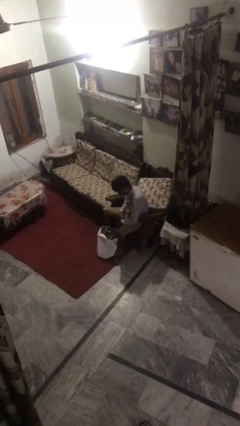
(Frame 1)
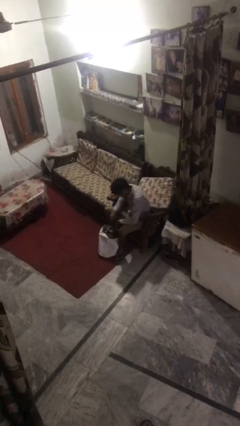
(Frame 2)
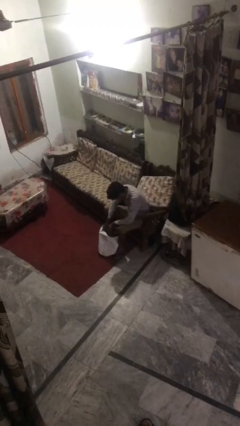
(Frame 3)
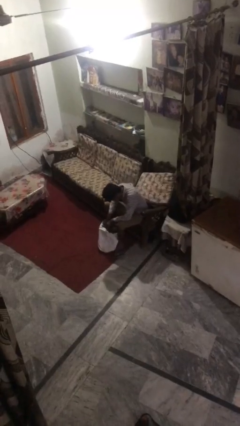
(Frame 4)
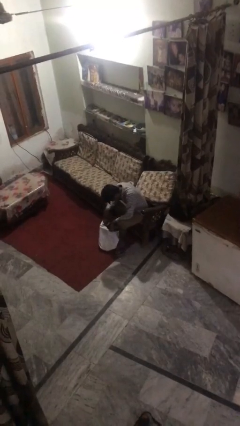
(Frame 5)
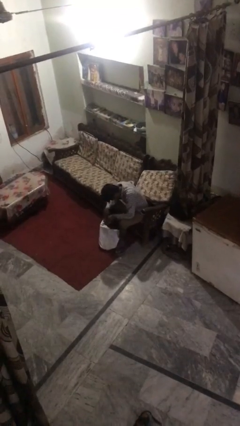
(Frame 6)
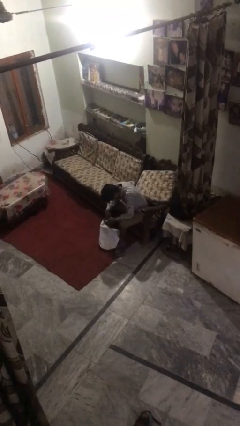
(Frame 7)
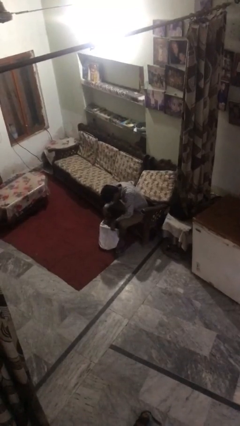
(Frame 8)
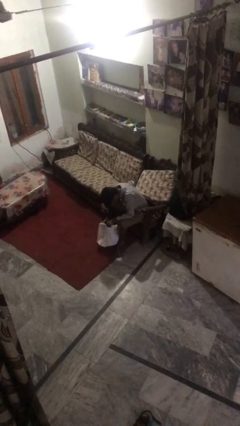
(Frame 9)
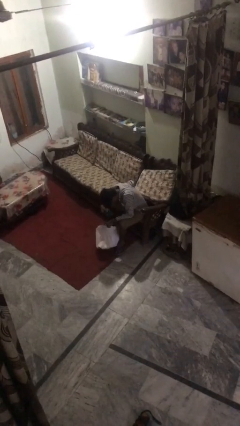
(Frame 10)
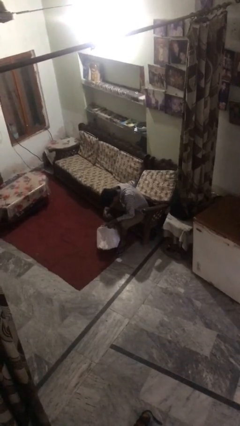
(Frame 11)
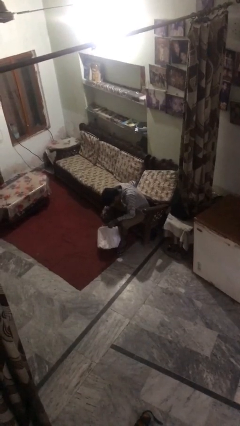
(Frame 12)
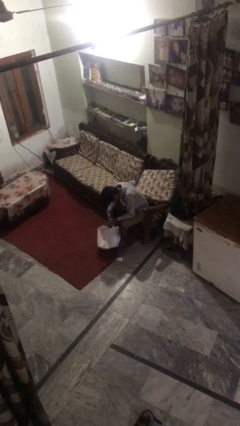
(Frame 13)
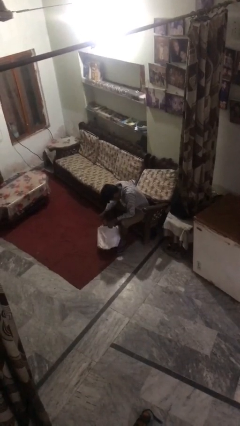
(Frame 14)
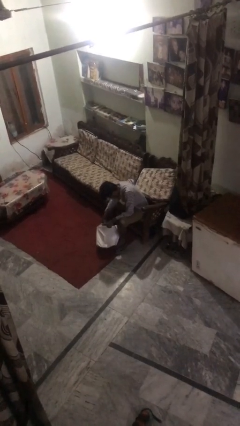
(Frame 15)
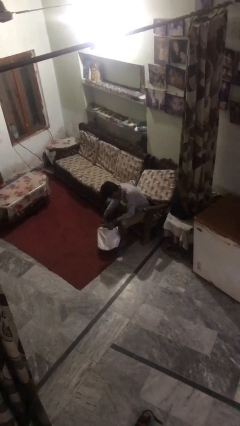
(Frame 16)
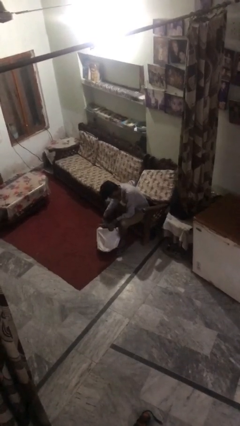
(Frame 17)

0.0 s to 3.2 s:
person searches under bed

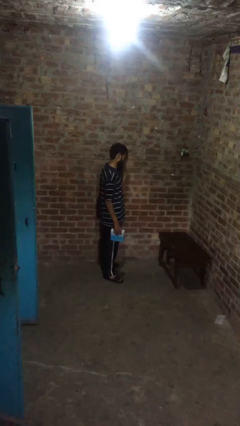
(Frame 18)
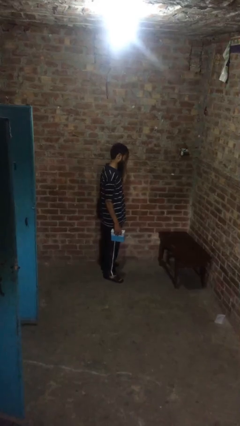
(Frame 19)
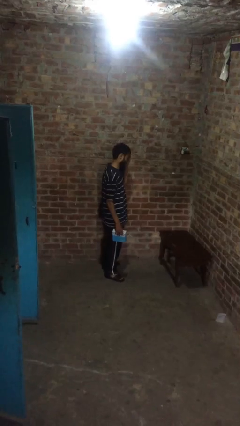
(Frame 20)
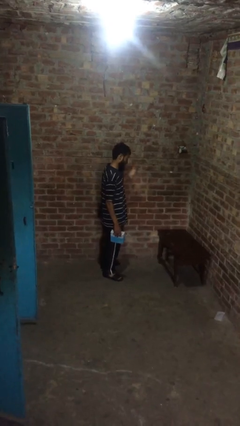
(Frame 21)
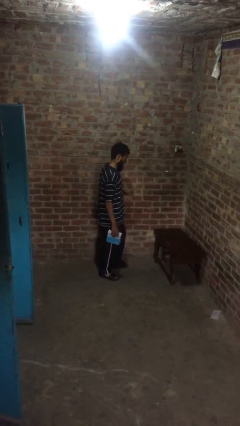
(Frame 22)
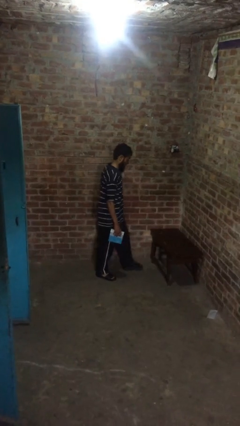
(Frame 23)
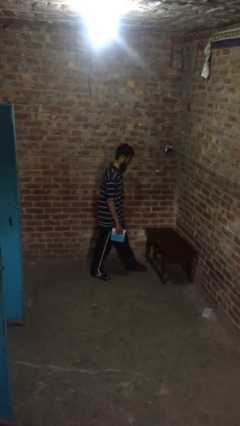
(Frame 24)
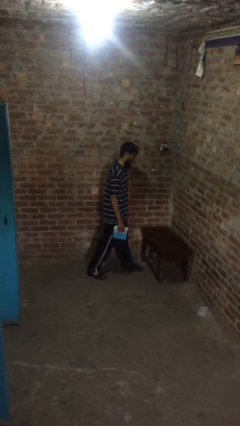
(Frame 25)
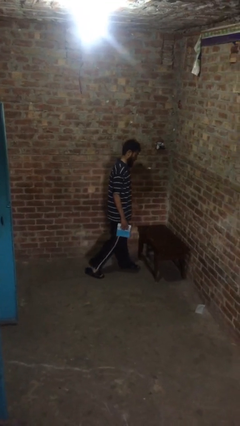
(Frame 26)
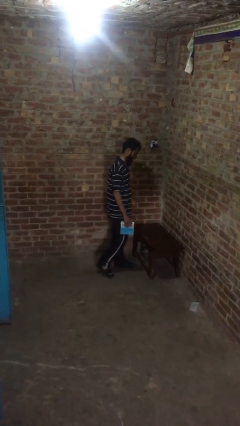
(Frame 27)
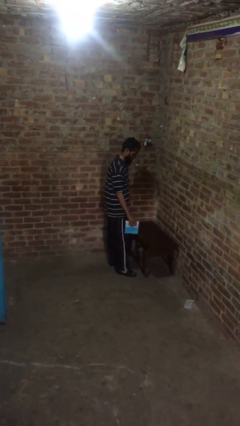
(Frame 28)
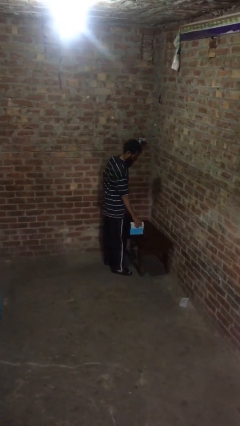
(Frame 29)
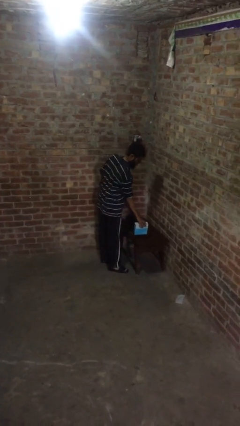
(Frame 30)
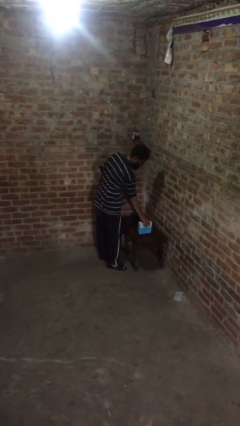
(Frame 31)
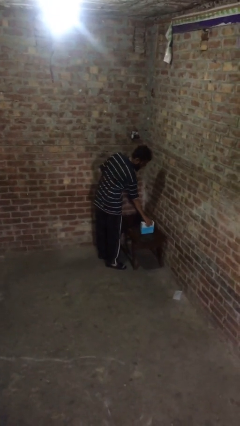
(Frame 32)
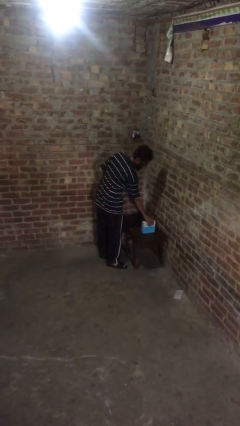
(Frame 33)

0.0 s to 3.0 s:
person puts down object on table

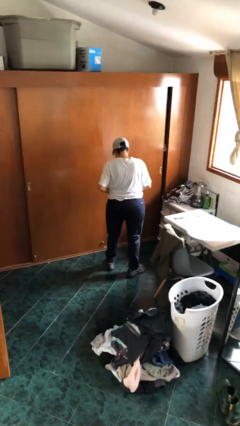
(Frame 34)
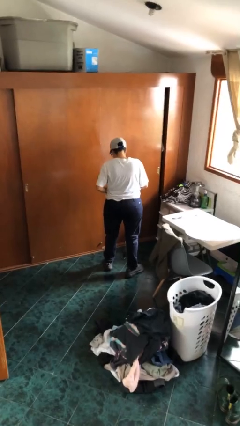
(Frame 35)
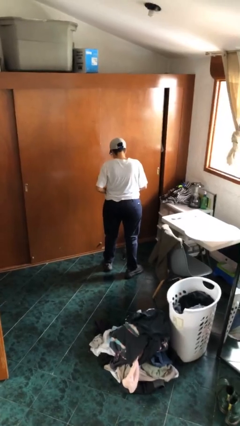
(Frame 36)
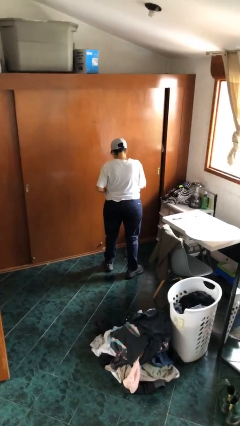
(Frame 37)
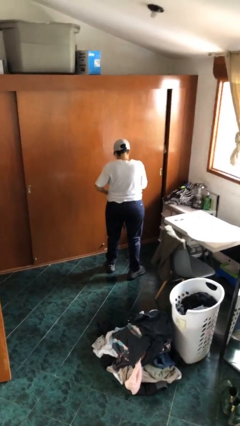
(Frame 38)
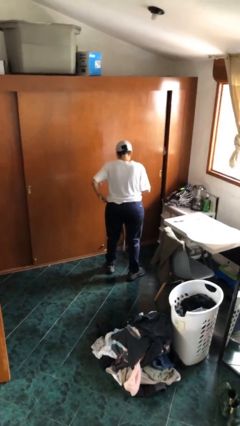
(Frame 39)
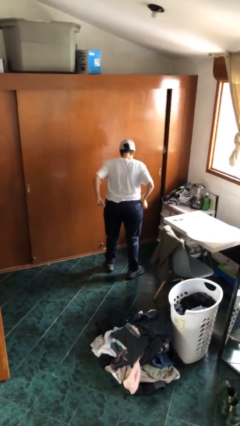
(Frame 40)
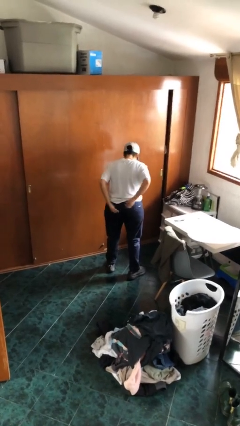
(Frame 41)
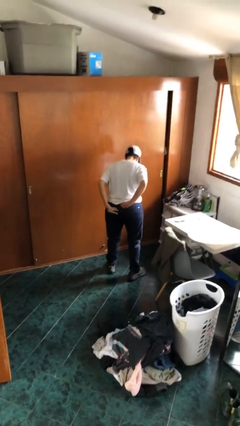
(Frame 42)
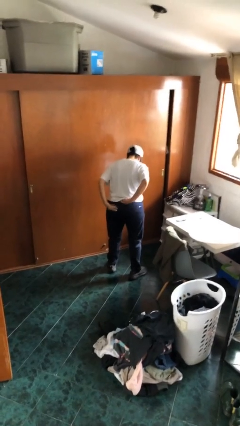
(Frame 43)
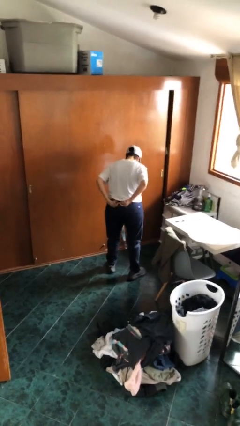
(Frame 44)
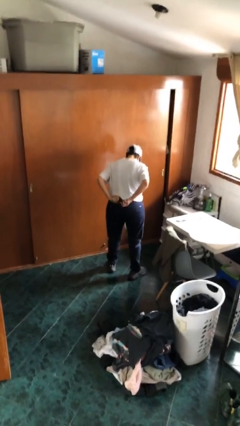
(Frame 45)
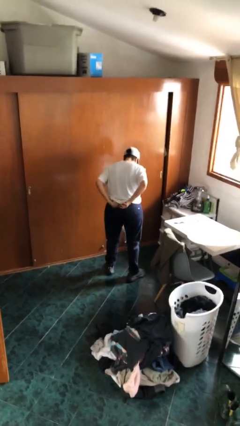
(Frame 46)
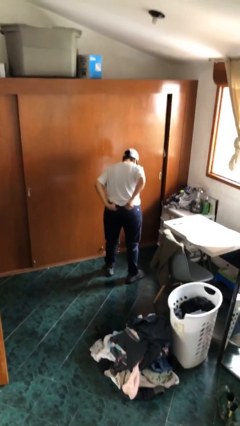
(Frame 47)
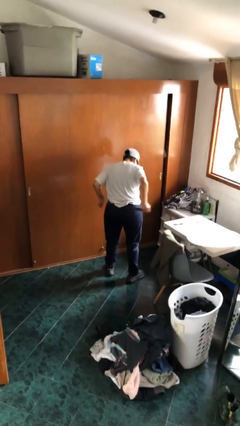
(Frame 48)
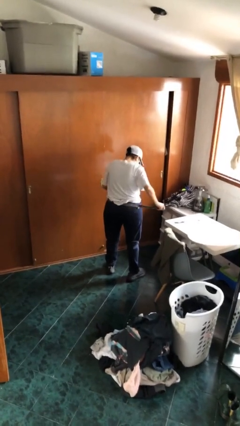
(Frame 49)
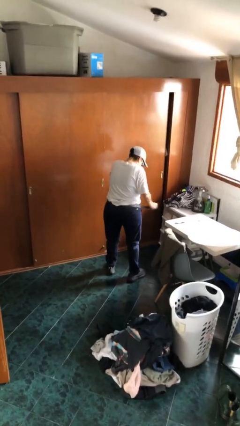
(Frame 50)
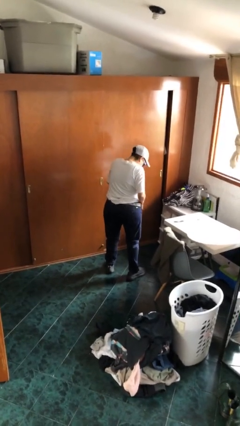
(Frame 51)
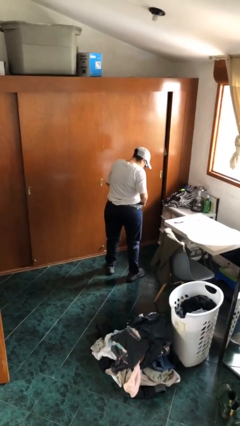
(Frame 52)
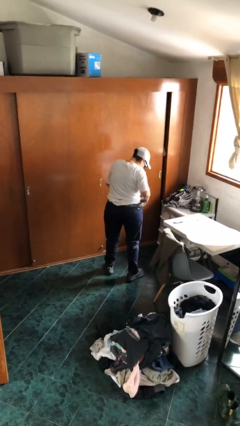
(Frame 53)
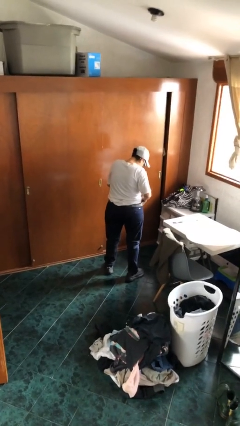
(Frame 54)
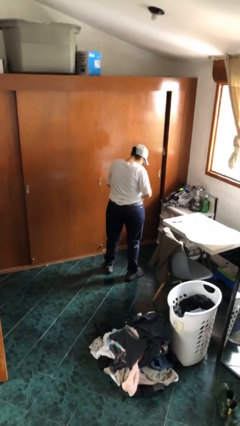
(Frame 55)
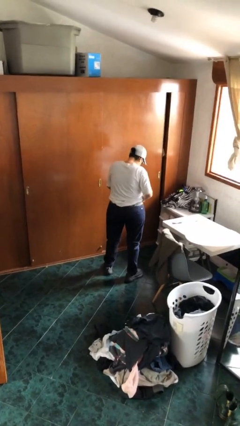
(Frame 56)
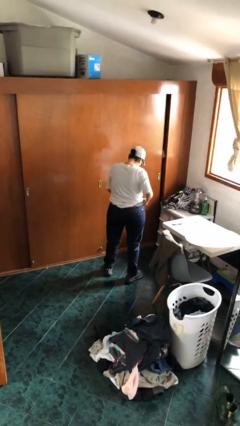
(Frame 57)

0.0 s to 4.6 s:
person puts on belt

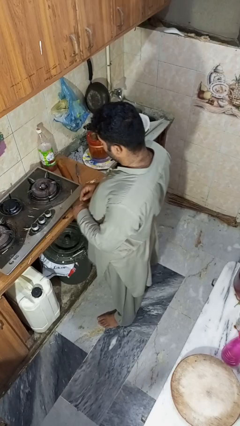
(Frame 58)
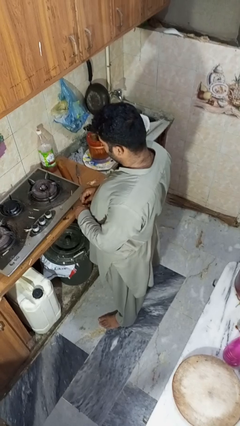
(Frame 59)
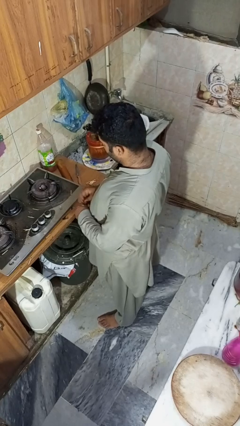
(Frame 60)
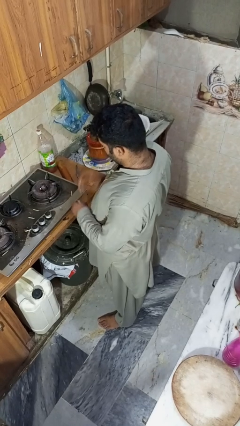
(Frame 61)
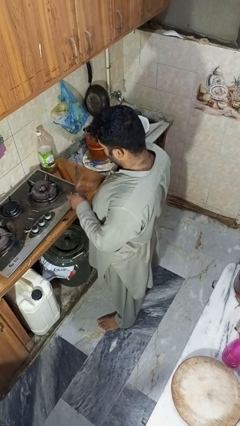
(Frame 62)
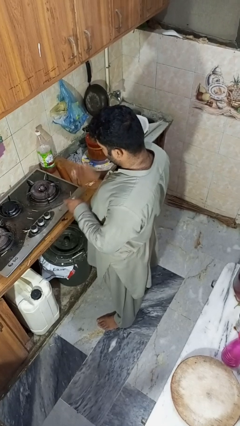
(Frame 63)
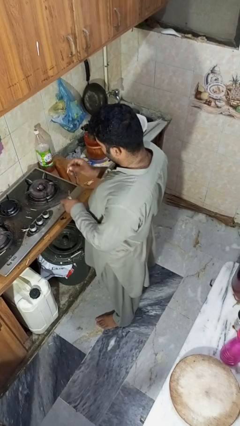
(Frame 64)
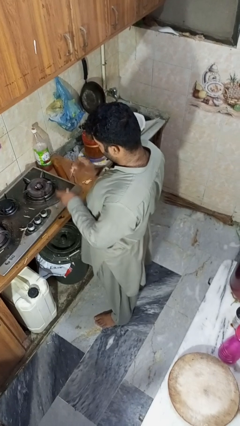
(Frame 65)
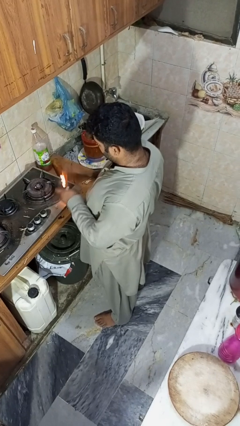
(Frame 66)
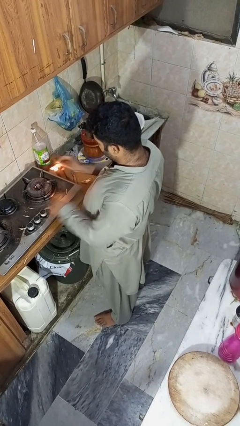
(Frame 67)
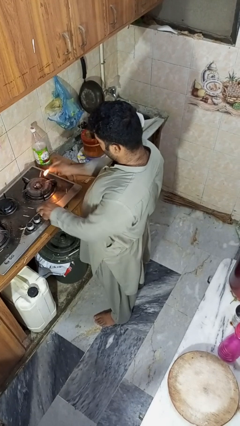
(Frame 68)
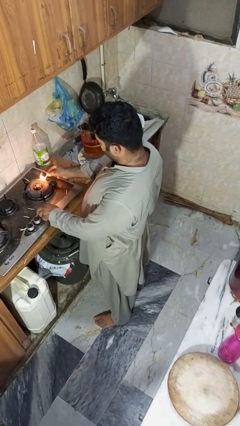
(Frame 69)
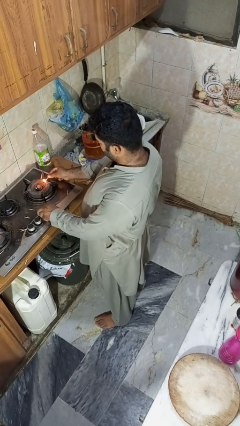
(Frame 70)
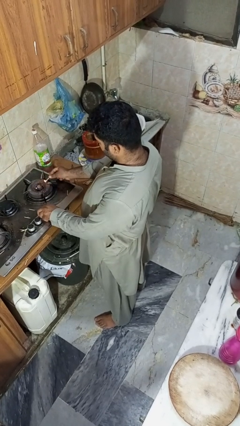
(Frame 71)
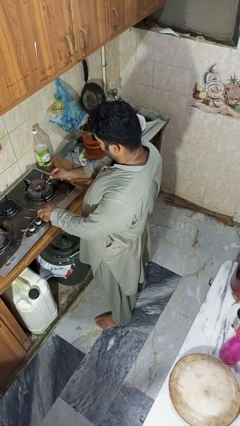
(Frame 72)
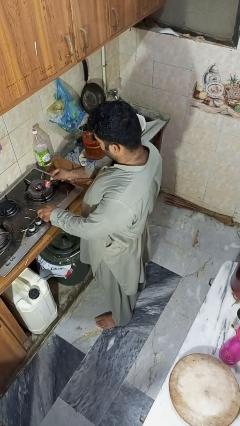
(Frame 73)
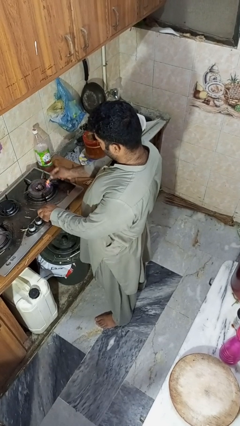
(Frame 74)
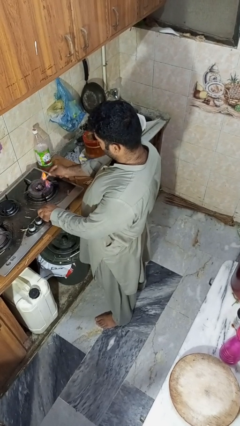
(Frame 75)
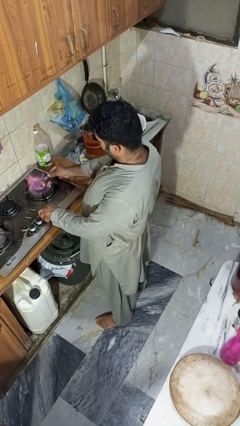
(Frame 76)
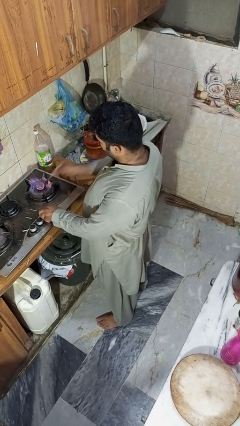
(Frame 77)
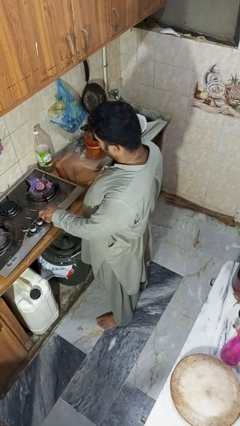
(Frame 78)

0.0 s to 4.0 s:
person turns on stovetop

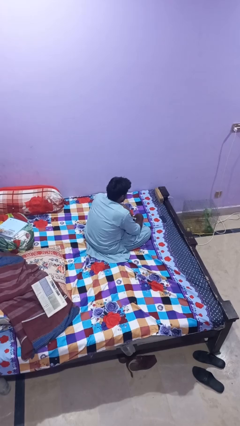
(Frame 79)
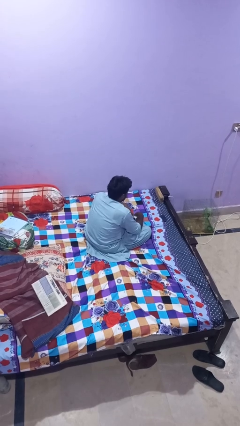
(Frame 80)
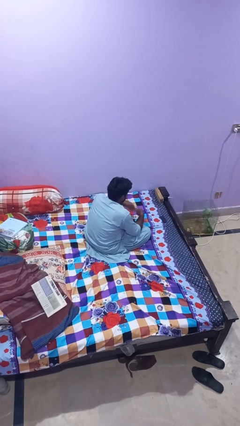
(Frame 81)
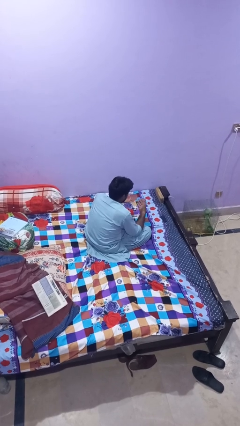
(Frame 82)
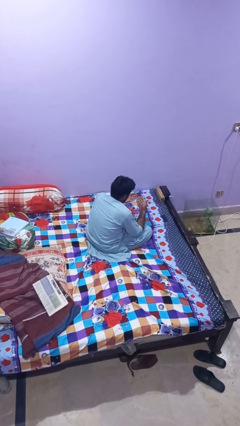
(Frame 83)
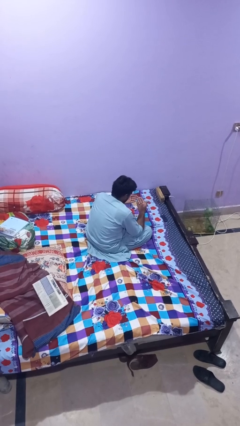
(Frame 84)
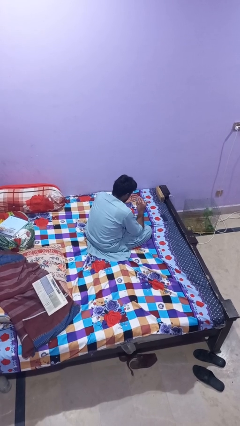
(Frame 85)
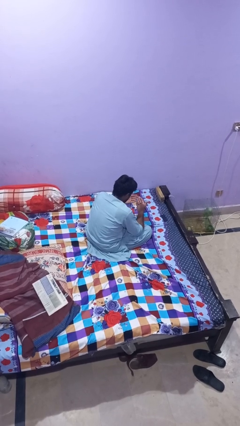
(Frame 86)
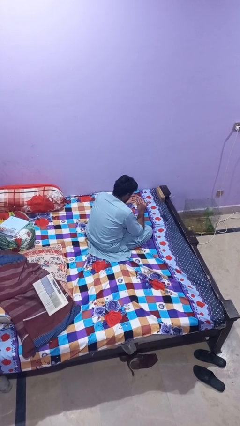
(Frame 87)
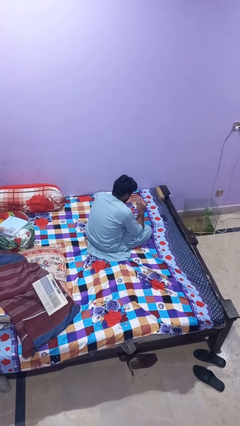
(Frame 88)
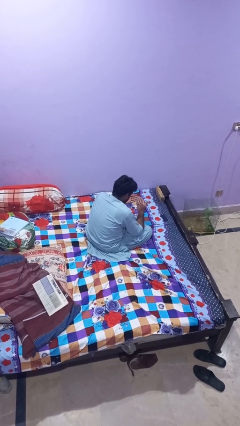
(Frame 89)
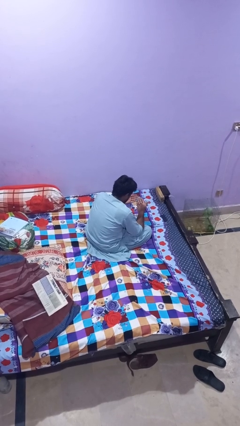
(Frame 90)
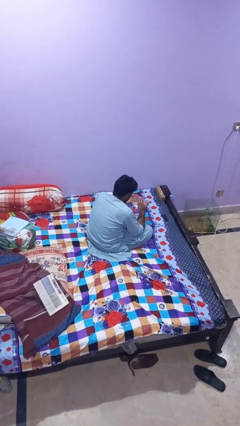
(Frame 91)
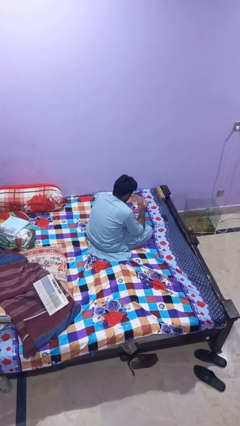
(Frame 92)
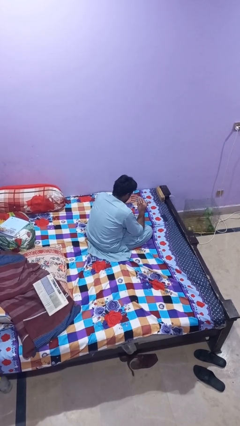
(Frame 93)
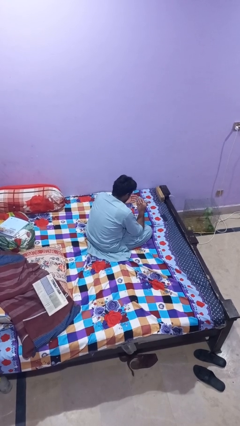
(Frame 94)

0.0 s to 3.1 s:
person looks at hands in lap
